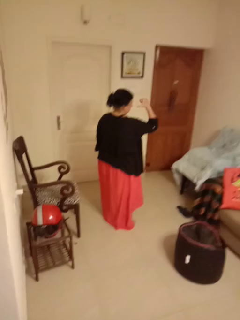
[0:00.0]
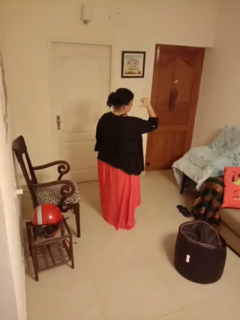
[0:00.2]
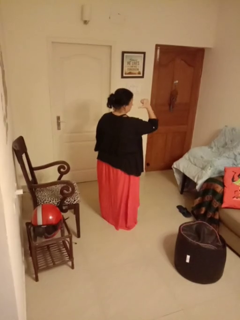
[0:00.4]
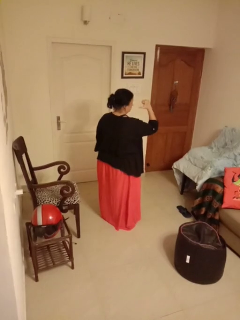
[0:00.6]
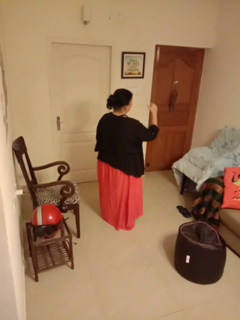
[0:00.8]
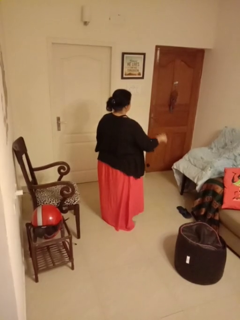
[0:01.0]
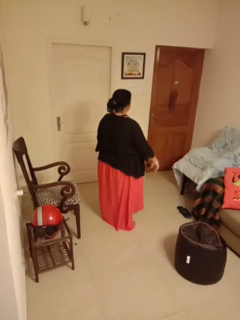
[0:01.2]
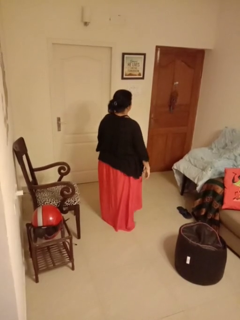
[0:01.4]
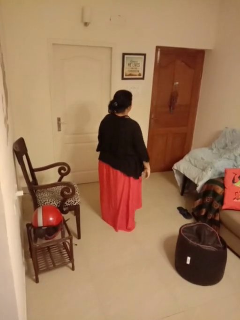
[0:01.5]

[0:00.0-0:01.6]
person gestures behind me

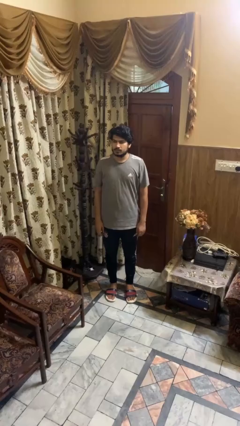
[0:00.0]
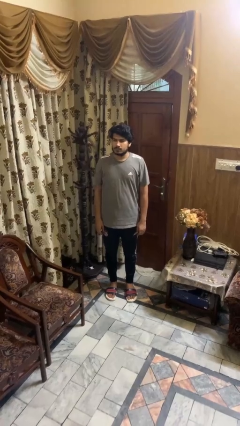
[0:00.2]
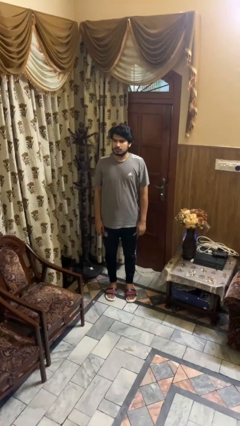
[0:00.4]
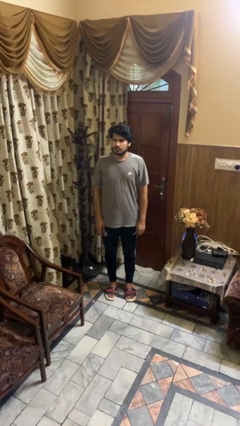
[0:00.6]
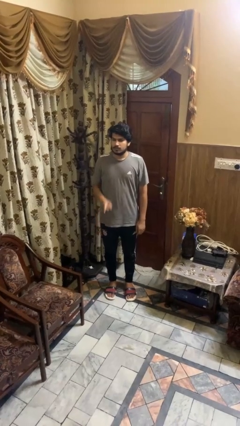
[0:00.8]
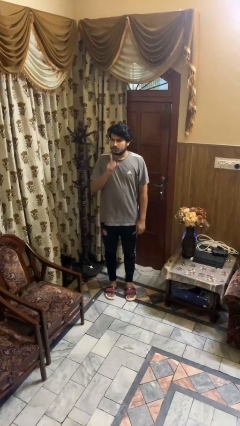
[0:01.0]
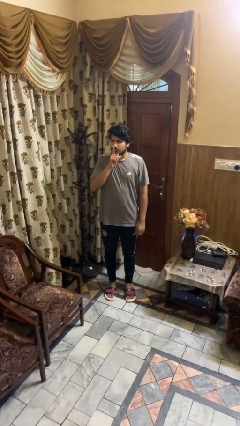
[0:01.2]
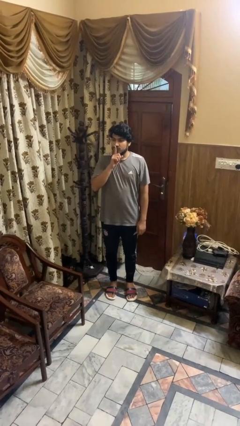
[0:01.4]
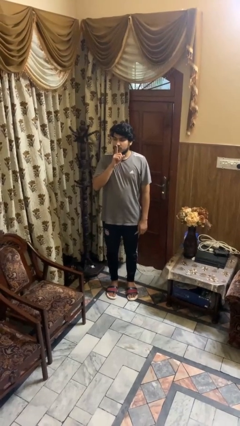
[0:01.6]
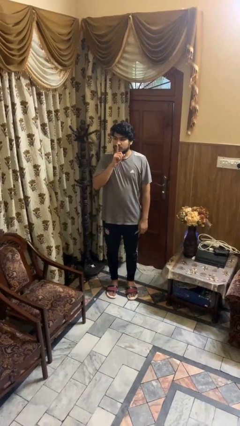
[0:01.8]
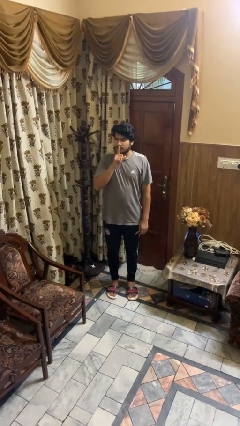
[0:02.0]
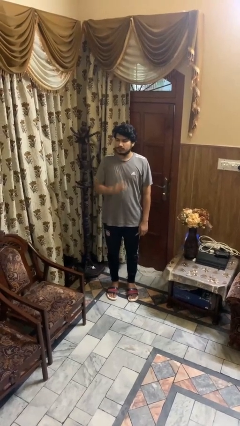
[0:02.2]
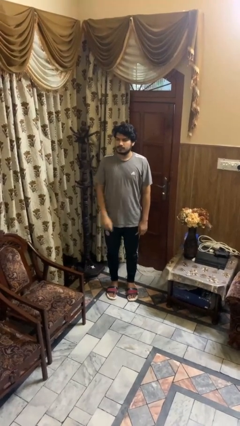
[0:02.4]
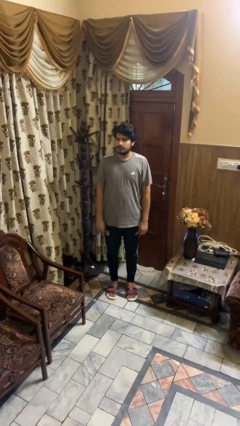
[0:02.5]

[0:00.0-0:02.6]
person gestures be quiet

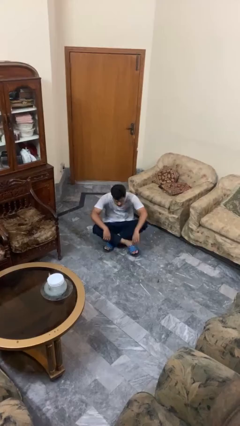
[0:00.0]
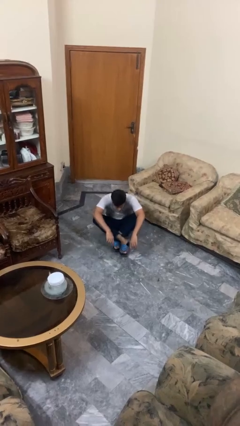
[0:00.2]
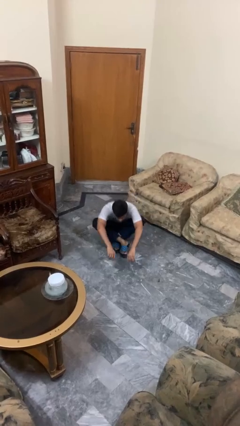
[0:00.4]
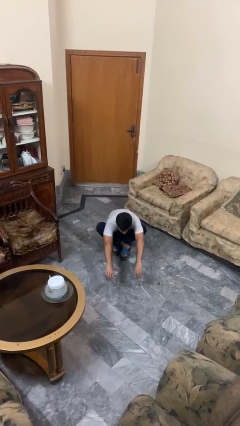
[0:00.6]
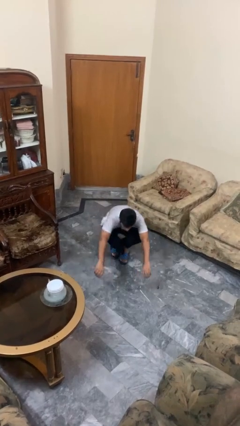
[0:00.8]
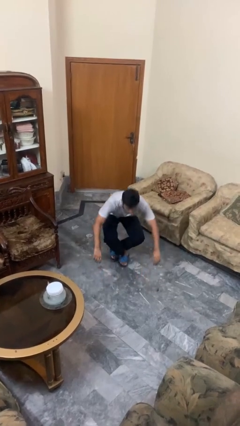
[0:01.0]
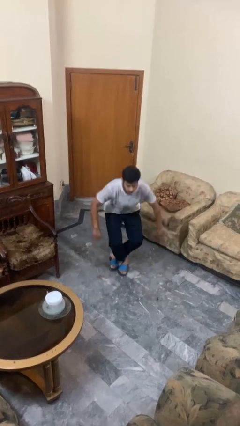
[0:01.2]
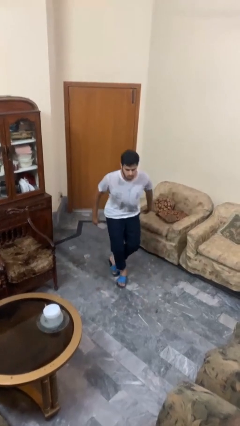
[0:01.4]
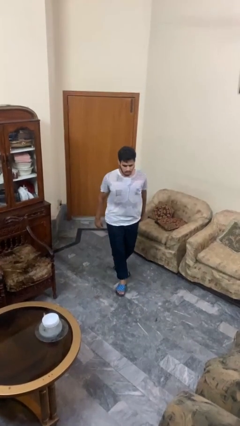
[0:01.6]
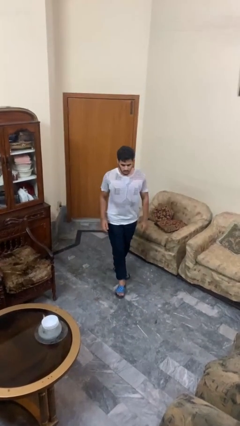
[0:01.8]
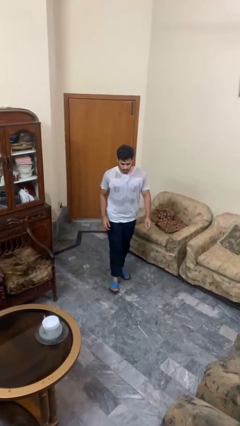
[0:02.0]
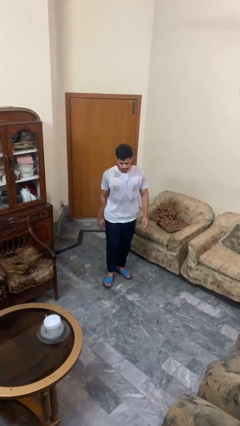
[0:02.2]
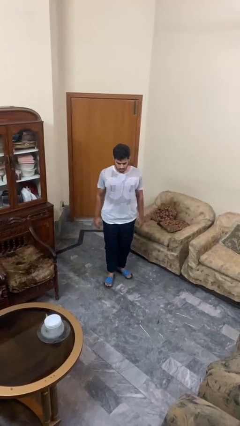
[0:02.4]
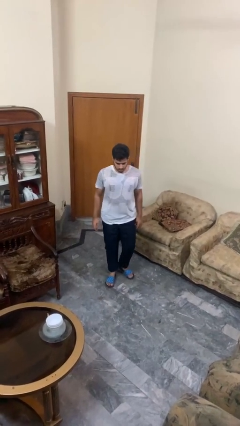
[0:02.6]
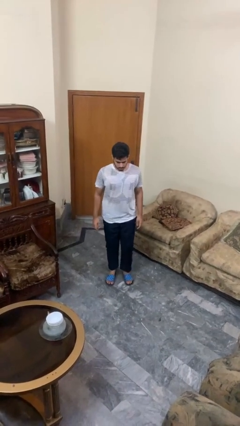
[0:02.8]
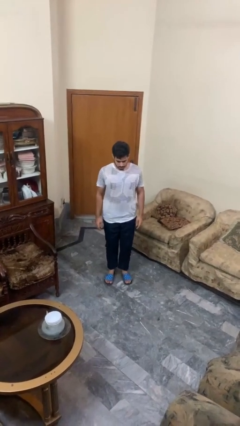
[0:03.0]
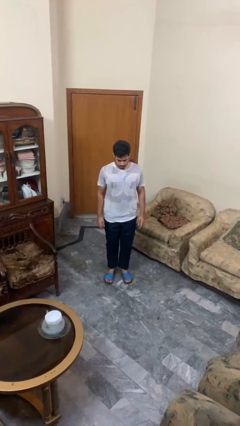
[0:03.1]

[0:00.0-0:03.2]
person stands up from floor

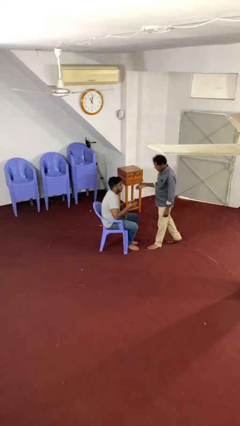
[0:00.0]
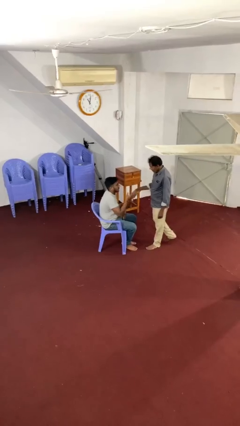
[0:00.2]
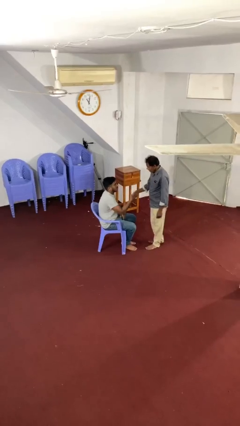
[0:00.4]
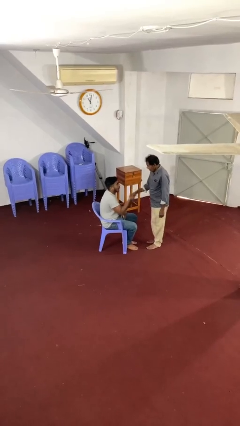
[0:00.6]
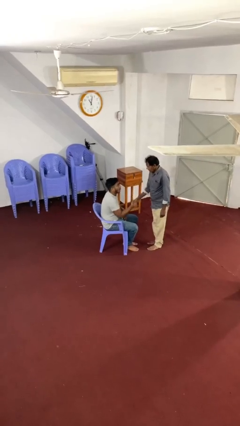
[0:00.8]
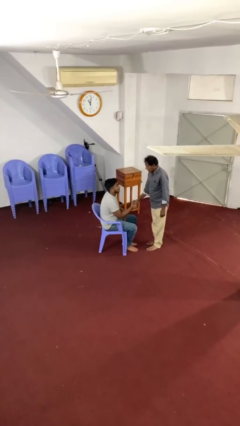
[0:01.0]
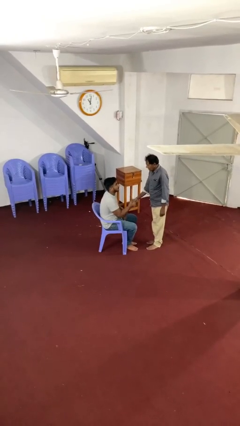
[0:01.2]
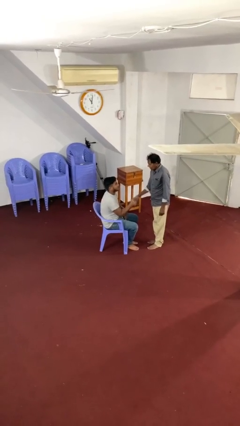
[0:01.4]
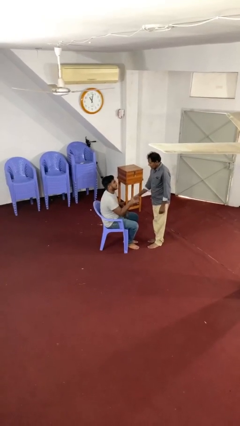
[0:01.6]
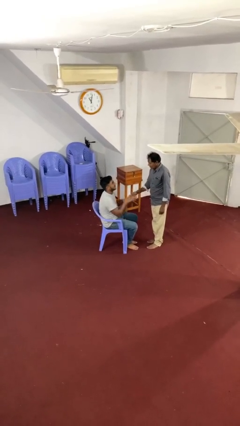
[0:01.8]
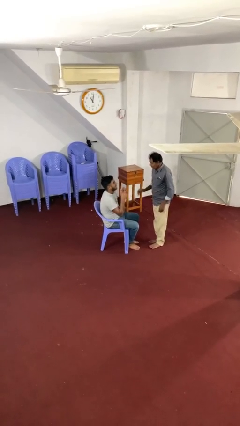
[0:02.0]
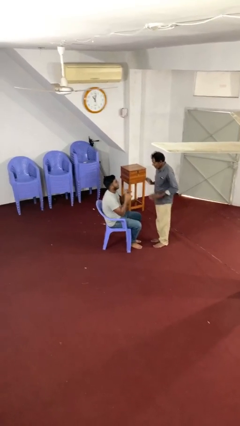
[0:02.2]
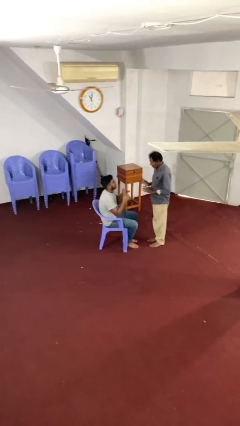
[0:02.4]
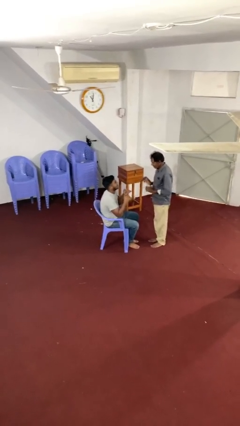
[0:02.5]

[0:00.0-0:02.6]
person shakes hand

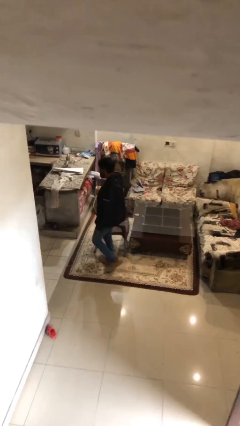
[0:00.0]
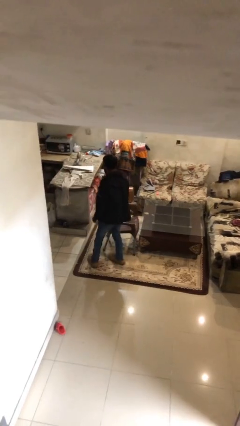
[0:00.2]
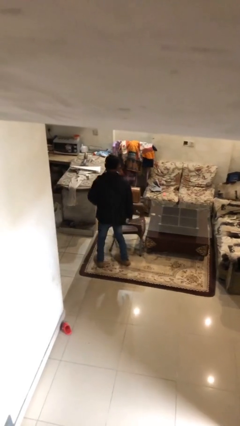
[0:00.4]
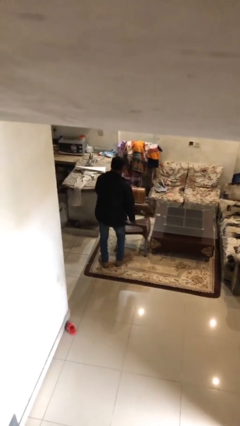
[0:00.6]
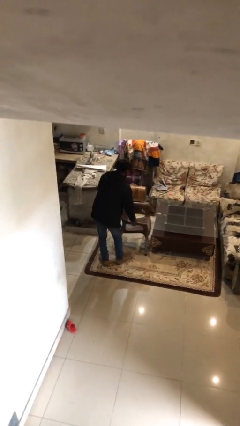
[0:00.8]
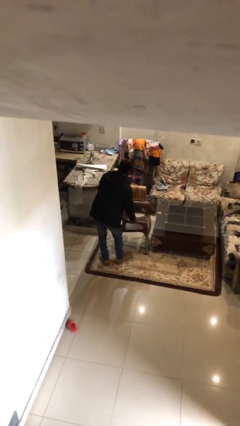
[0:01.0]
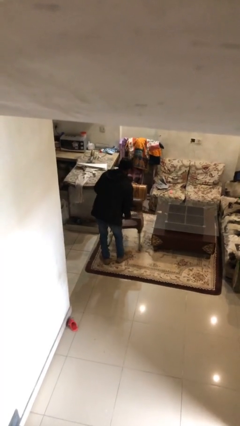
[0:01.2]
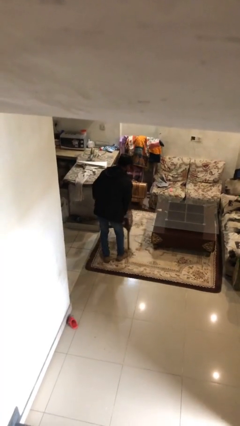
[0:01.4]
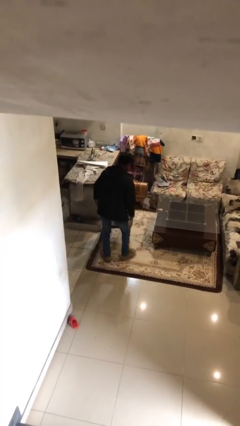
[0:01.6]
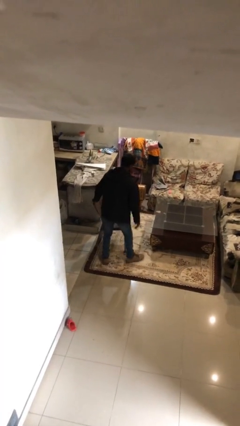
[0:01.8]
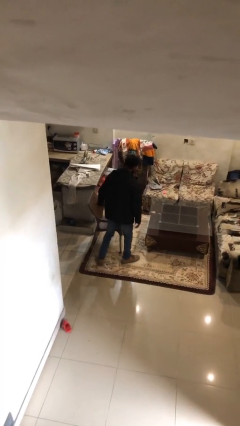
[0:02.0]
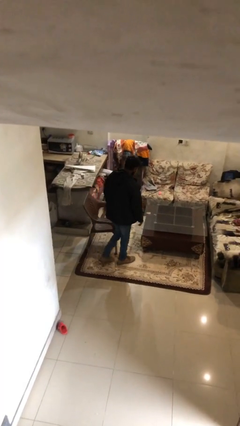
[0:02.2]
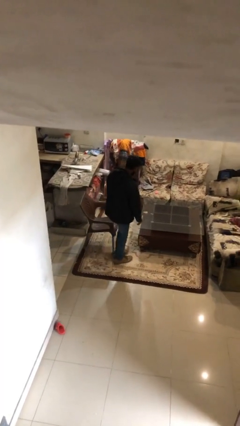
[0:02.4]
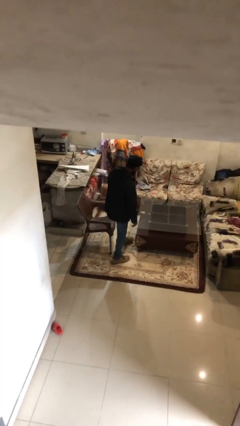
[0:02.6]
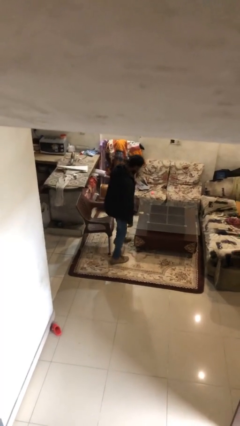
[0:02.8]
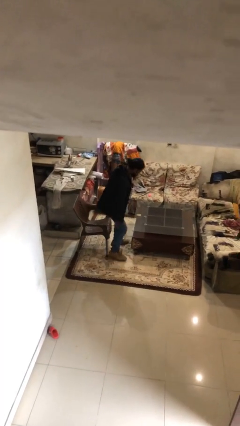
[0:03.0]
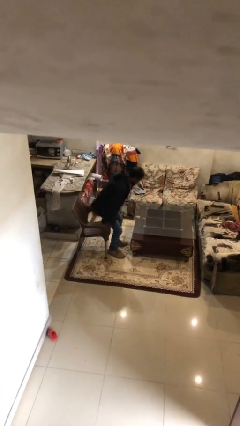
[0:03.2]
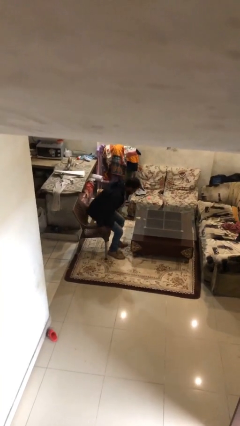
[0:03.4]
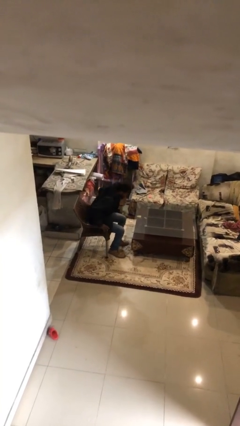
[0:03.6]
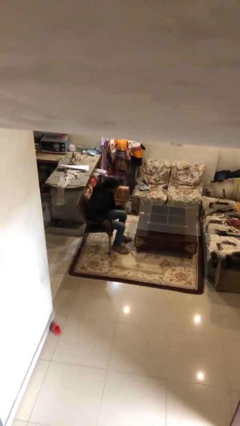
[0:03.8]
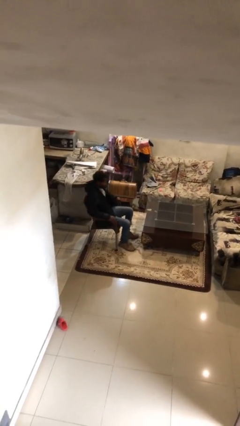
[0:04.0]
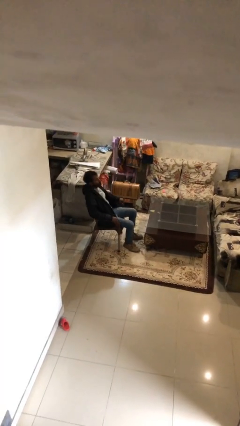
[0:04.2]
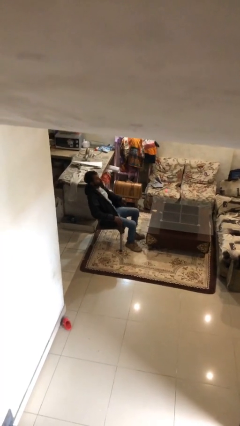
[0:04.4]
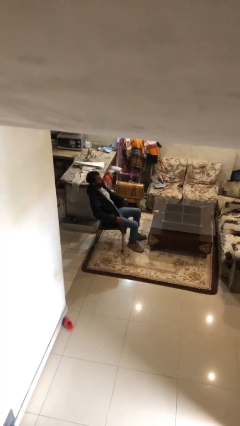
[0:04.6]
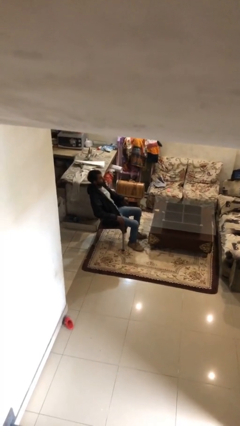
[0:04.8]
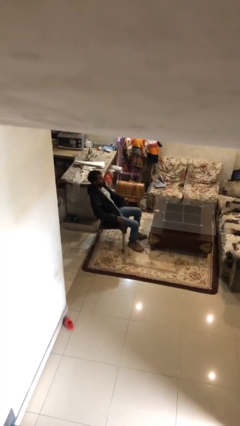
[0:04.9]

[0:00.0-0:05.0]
person sits down

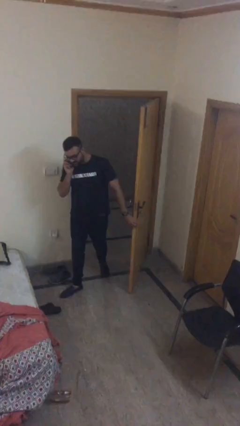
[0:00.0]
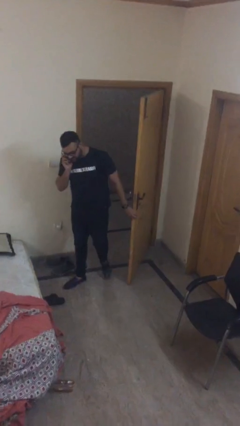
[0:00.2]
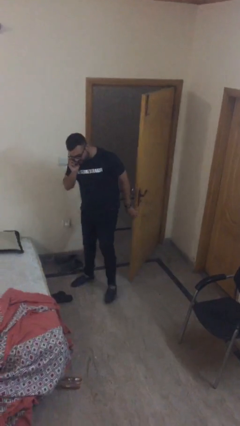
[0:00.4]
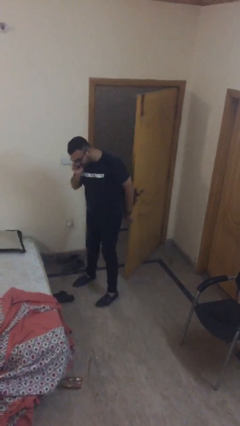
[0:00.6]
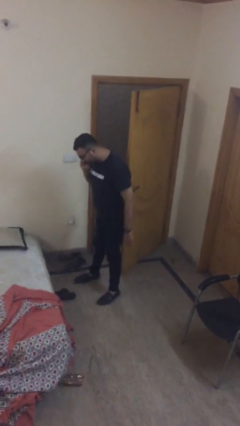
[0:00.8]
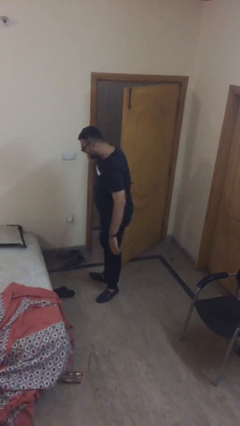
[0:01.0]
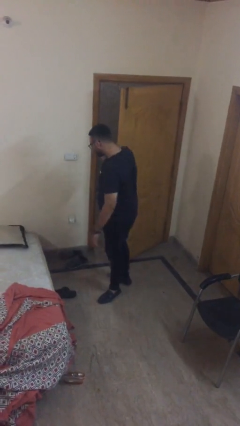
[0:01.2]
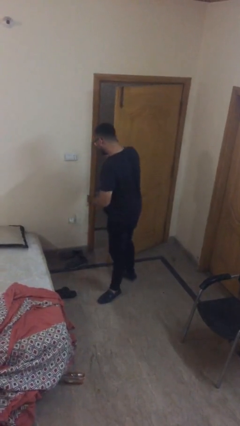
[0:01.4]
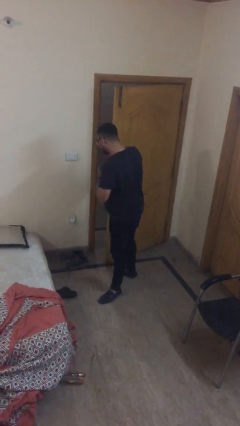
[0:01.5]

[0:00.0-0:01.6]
person enters scene through structure

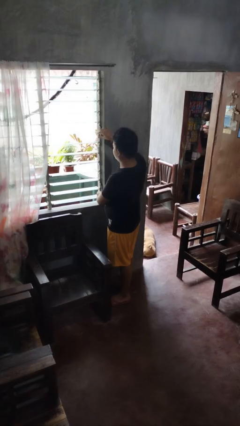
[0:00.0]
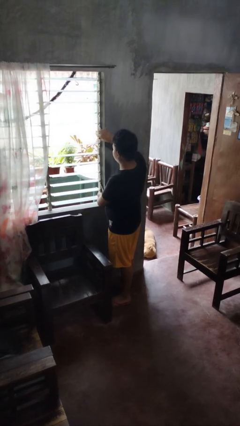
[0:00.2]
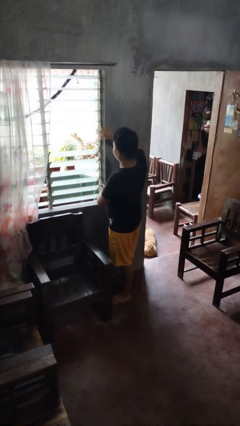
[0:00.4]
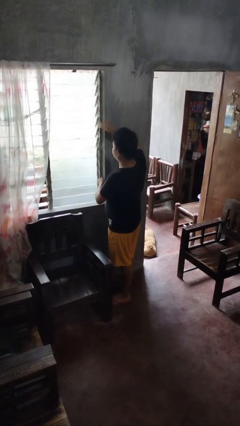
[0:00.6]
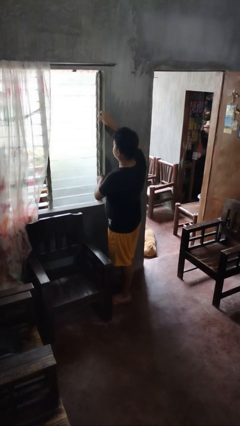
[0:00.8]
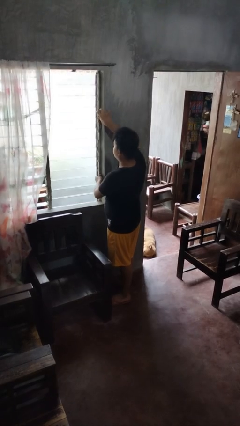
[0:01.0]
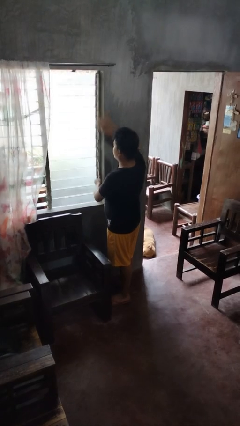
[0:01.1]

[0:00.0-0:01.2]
person closes home window
